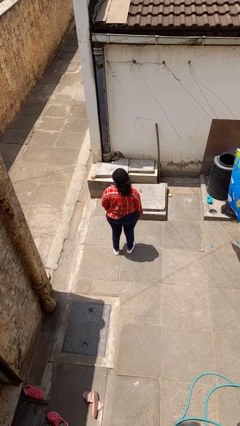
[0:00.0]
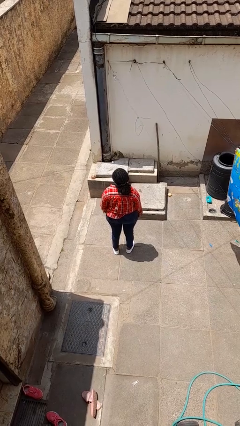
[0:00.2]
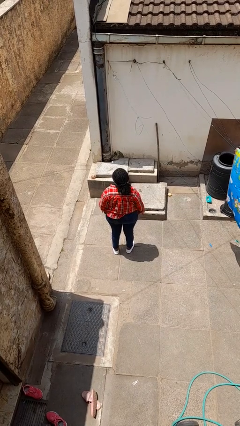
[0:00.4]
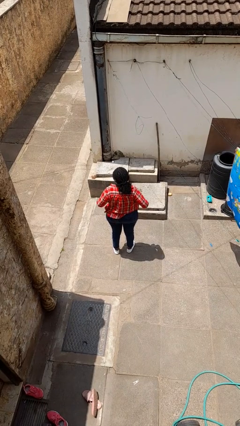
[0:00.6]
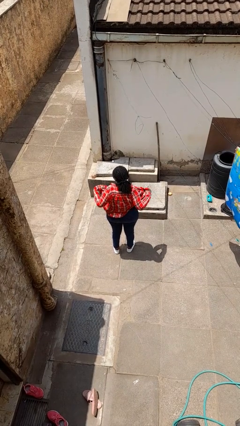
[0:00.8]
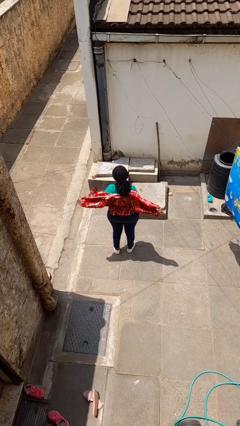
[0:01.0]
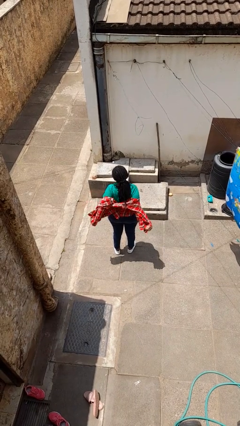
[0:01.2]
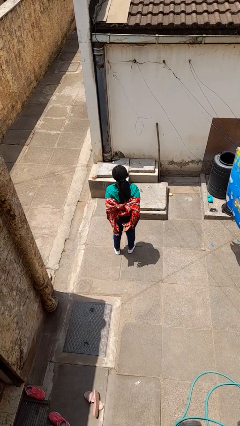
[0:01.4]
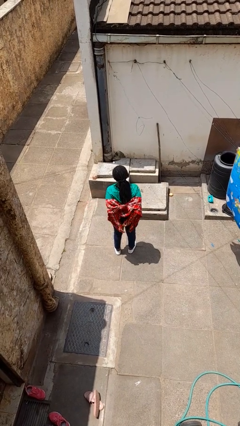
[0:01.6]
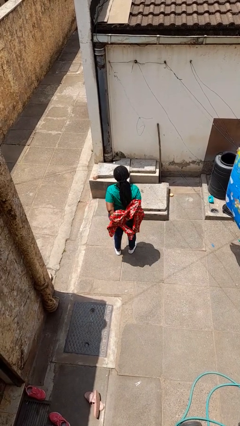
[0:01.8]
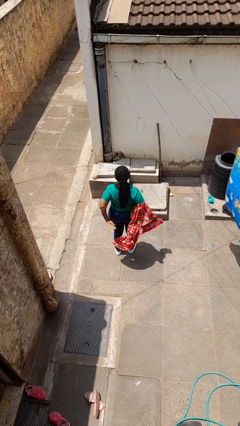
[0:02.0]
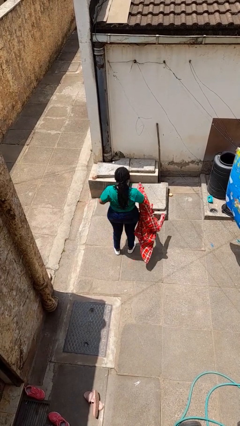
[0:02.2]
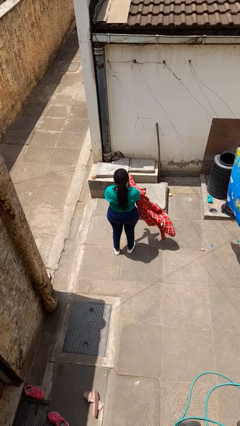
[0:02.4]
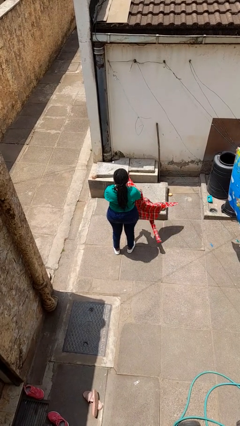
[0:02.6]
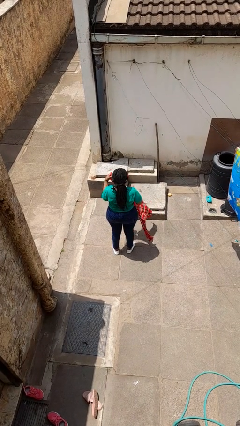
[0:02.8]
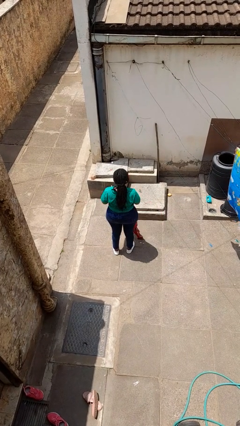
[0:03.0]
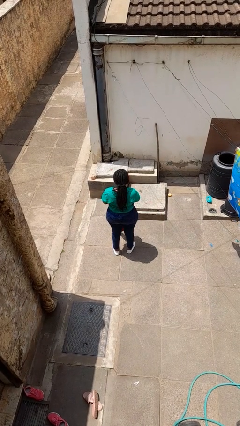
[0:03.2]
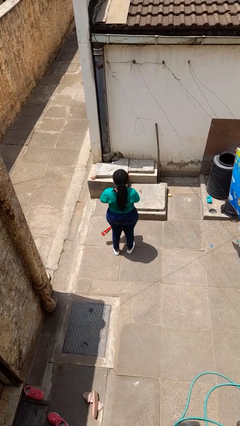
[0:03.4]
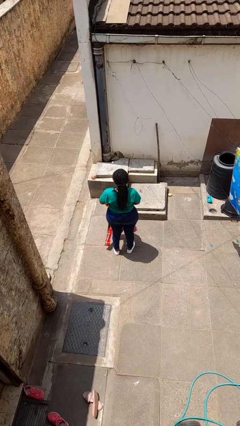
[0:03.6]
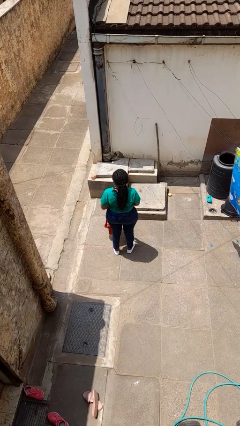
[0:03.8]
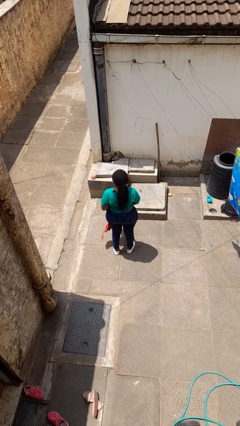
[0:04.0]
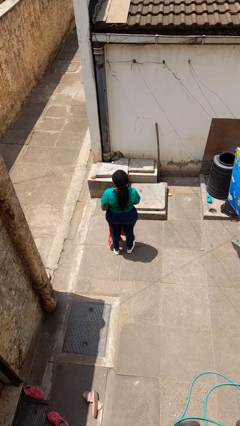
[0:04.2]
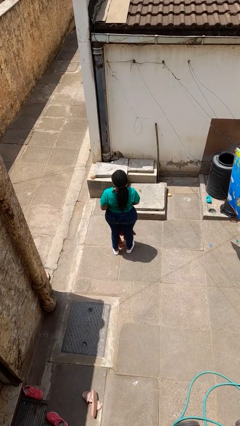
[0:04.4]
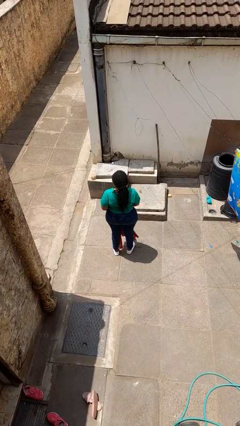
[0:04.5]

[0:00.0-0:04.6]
person takes off shirt

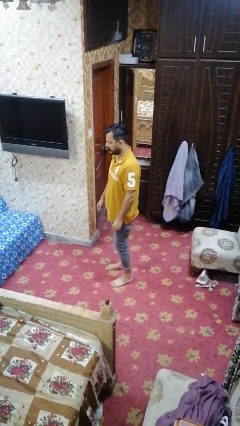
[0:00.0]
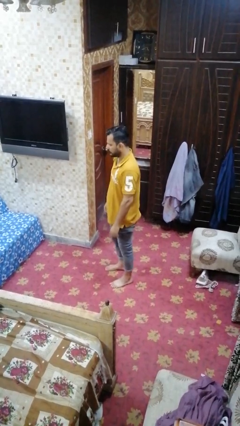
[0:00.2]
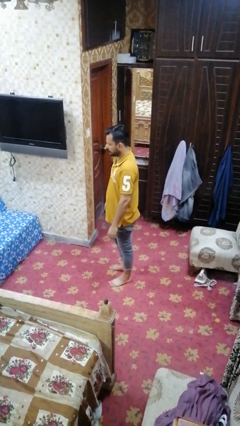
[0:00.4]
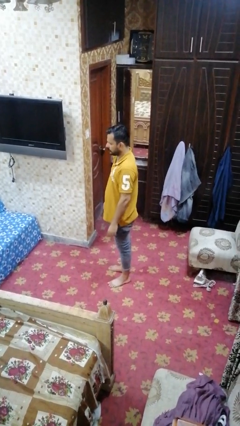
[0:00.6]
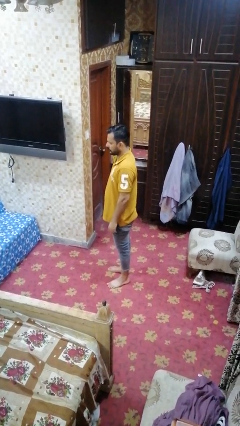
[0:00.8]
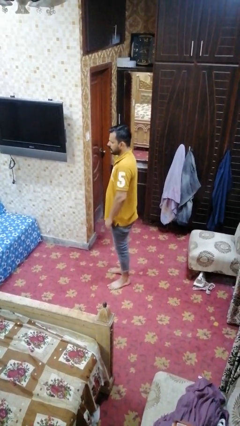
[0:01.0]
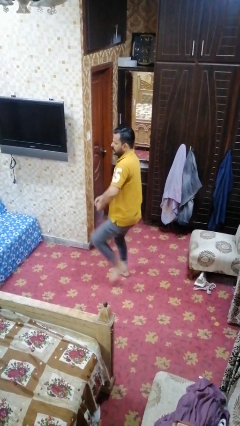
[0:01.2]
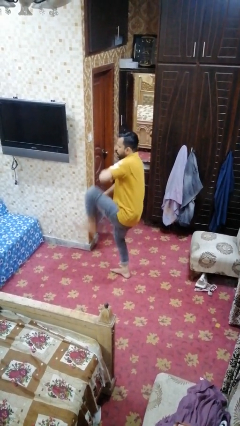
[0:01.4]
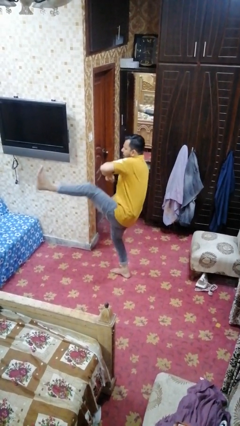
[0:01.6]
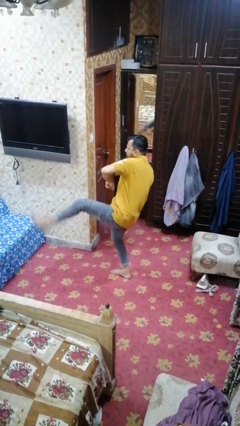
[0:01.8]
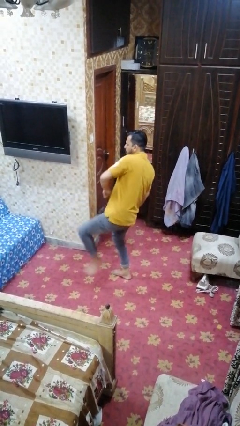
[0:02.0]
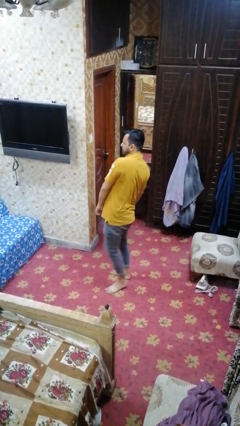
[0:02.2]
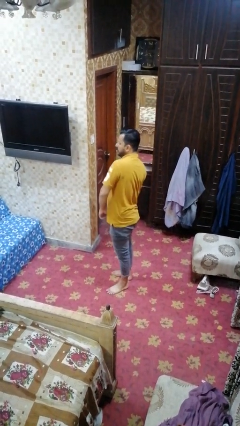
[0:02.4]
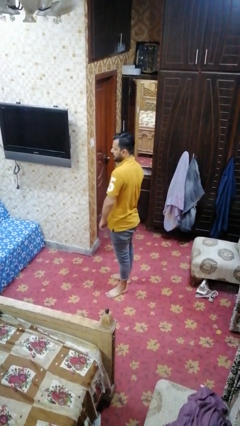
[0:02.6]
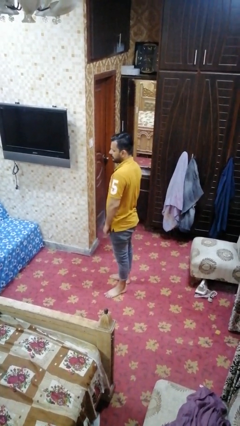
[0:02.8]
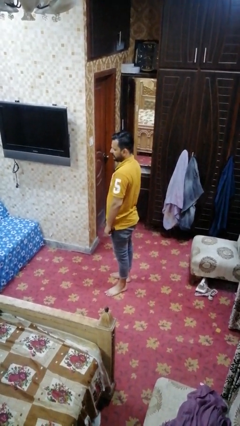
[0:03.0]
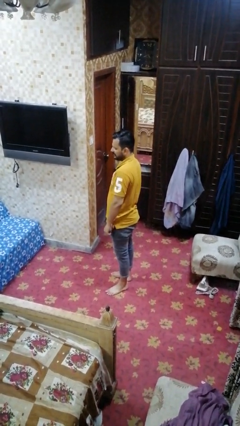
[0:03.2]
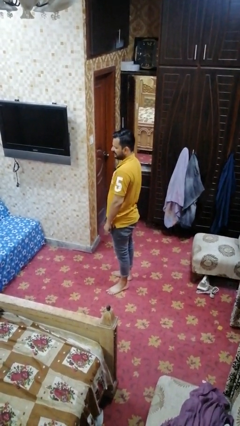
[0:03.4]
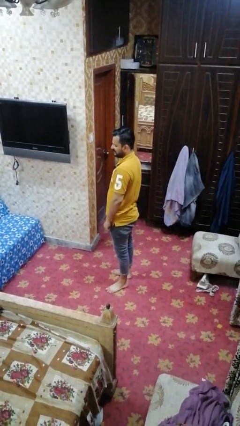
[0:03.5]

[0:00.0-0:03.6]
person karate kicks

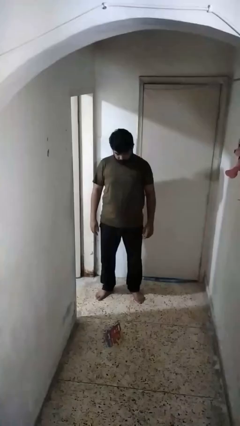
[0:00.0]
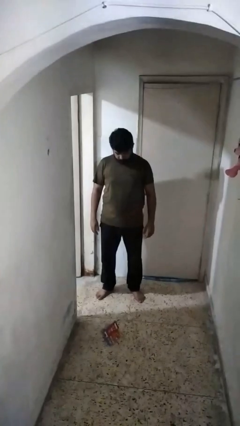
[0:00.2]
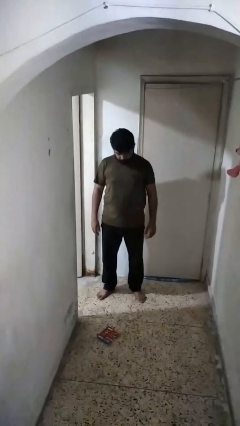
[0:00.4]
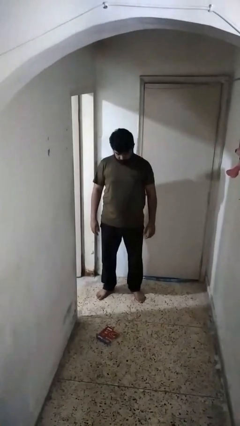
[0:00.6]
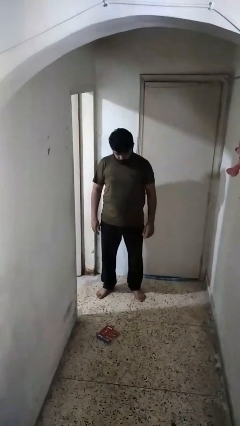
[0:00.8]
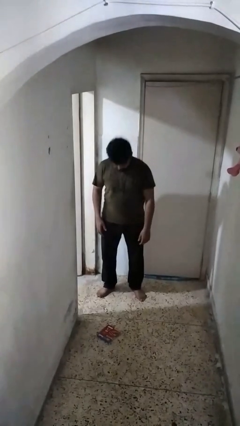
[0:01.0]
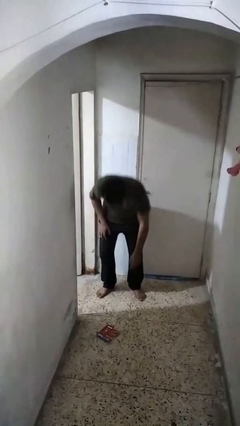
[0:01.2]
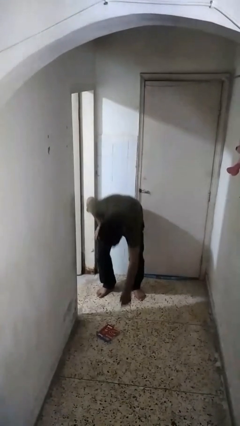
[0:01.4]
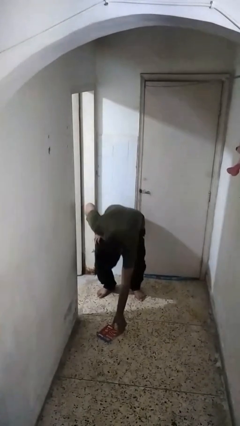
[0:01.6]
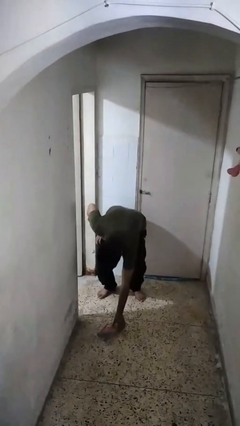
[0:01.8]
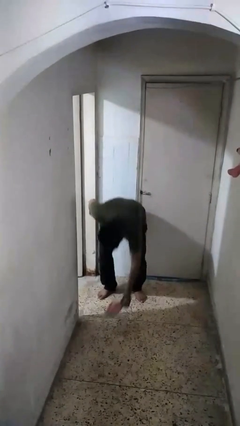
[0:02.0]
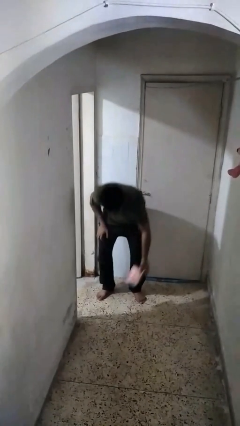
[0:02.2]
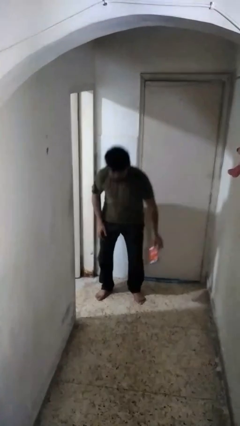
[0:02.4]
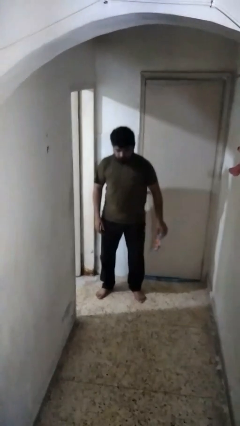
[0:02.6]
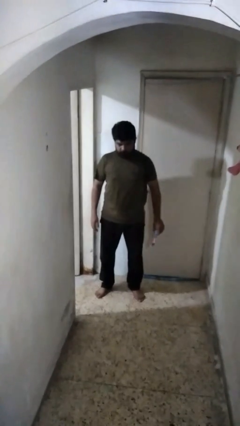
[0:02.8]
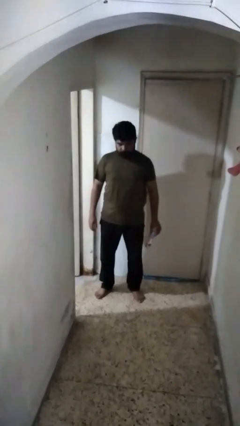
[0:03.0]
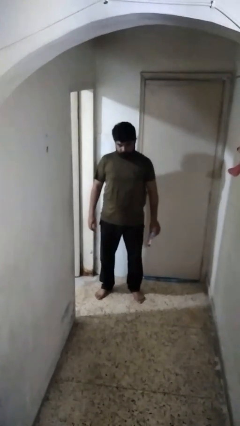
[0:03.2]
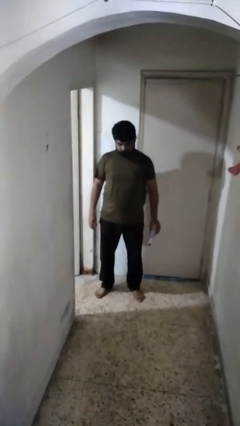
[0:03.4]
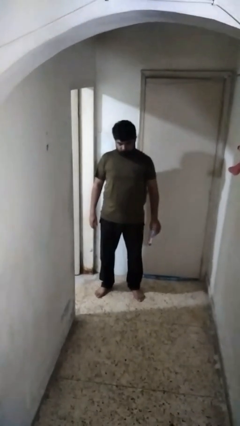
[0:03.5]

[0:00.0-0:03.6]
person picks up object from floor

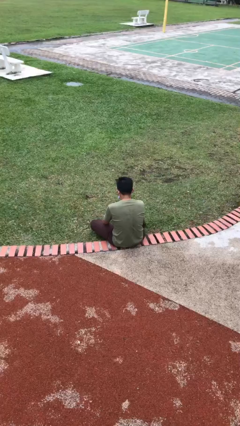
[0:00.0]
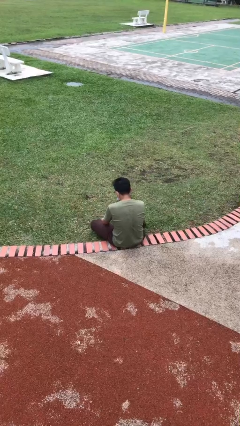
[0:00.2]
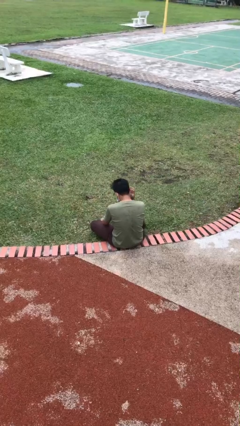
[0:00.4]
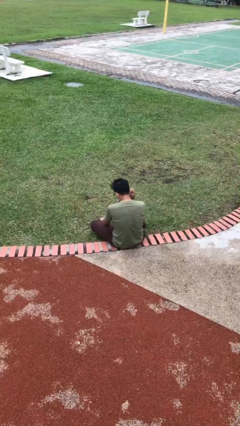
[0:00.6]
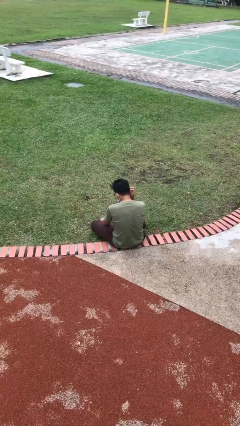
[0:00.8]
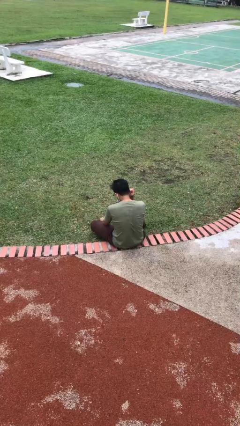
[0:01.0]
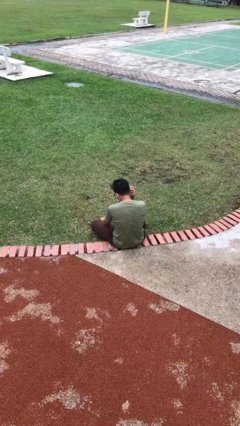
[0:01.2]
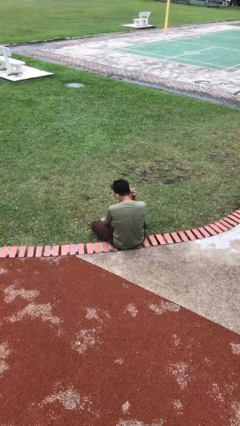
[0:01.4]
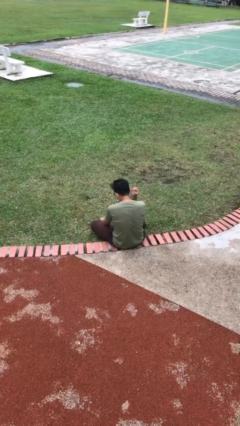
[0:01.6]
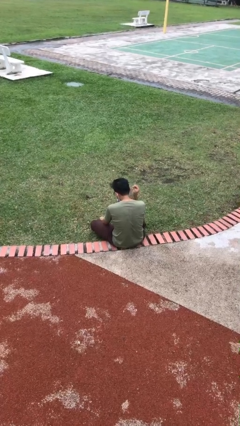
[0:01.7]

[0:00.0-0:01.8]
person touches earlobe

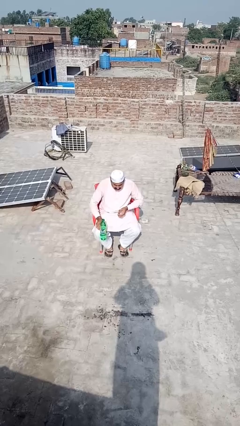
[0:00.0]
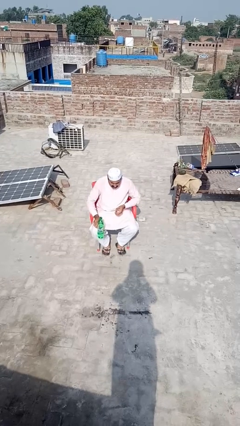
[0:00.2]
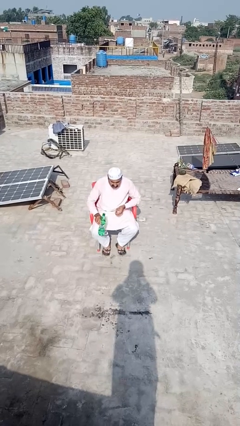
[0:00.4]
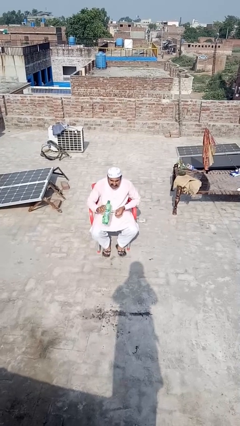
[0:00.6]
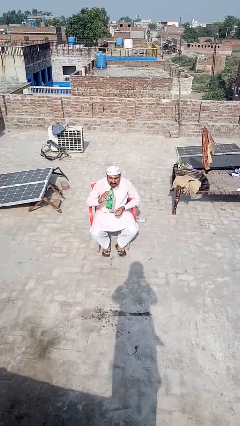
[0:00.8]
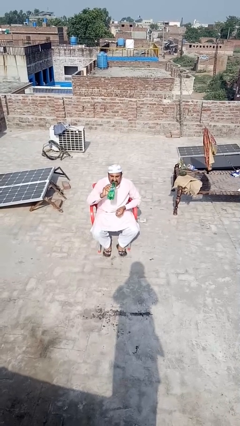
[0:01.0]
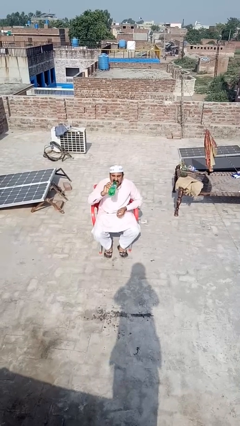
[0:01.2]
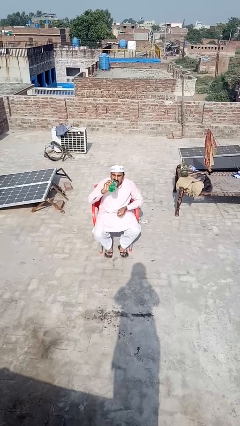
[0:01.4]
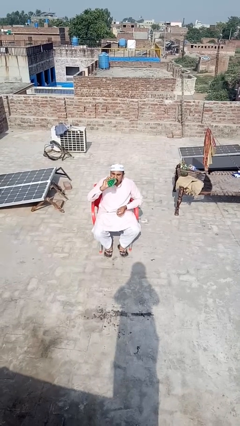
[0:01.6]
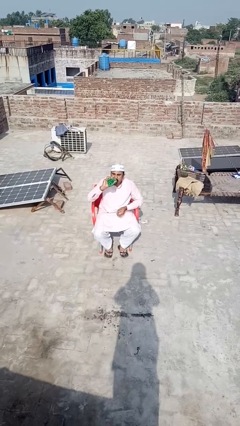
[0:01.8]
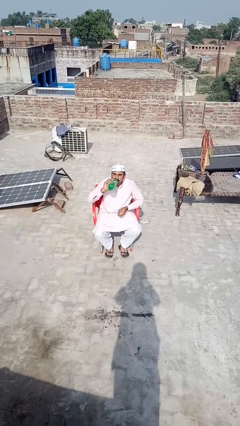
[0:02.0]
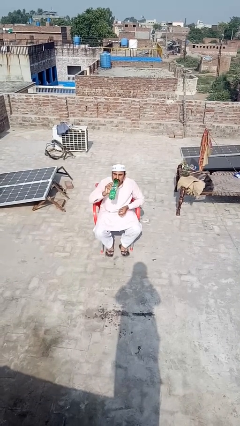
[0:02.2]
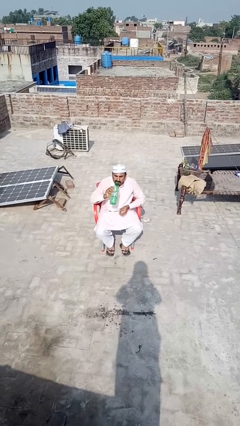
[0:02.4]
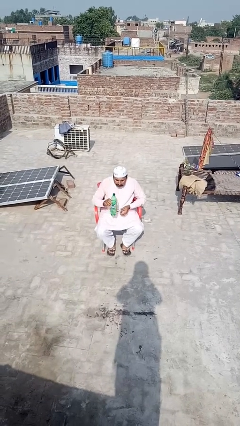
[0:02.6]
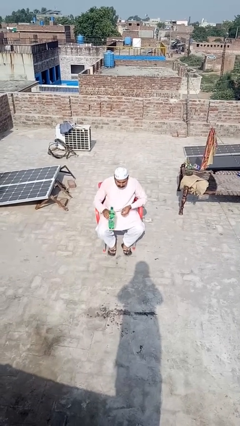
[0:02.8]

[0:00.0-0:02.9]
person drinks from bottle

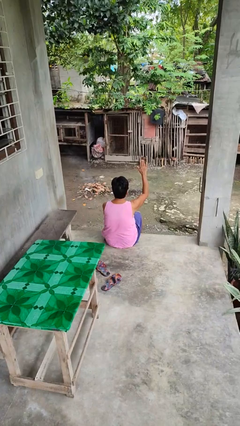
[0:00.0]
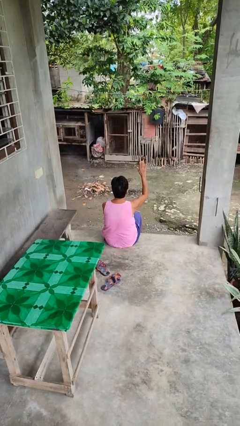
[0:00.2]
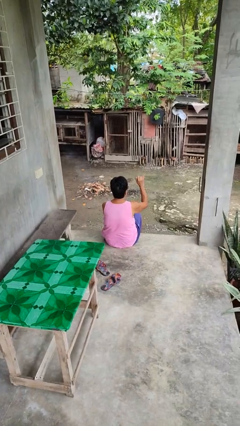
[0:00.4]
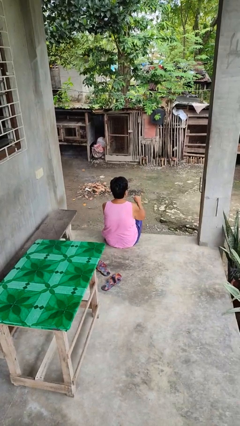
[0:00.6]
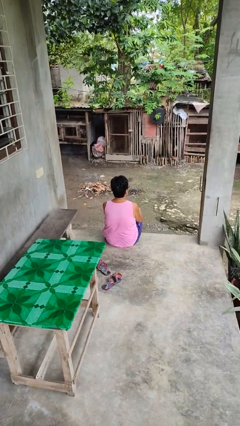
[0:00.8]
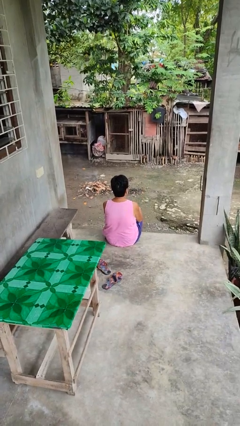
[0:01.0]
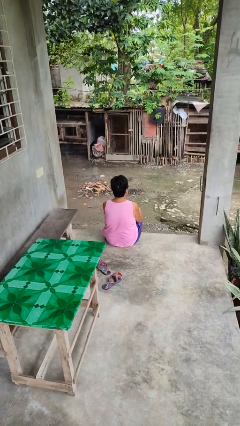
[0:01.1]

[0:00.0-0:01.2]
person gestures lower hand
